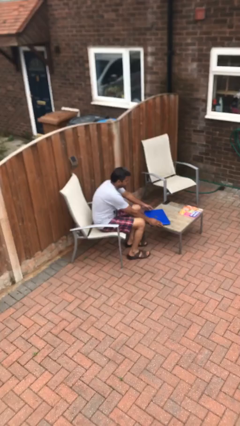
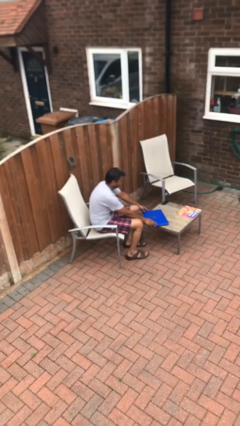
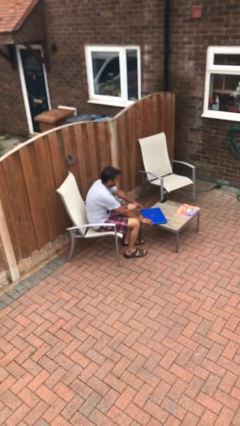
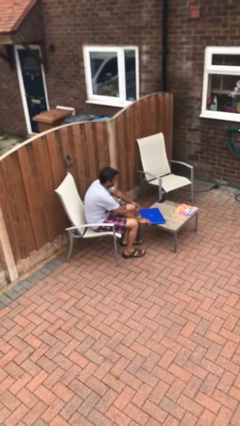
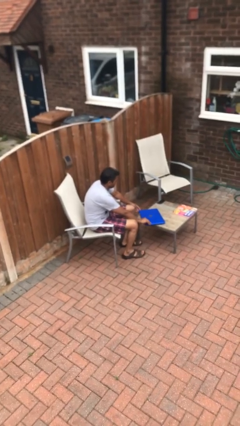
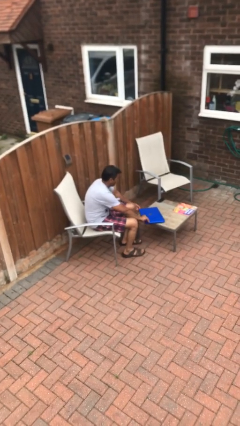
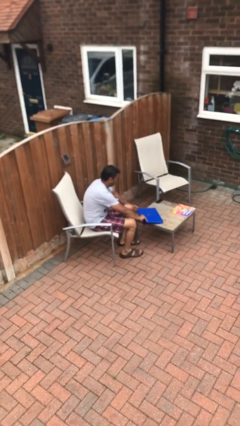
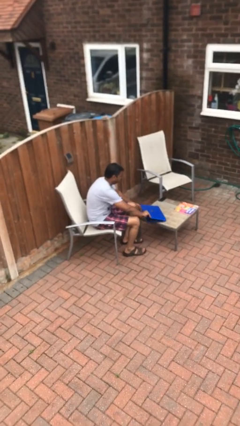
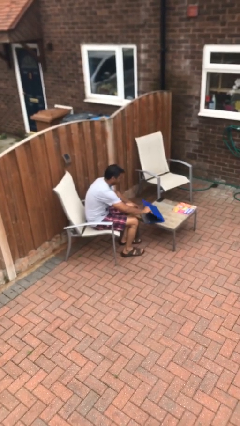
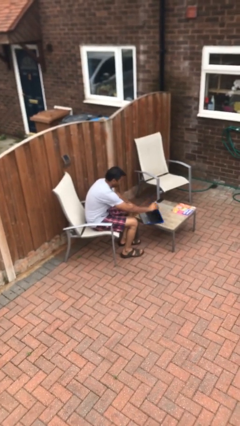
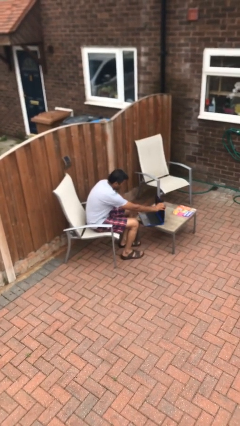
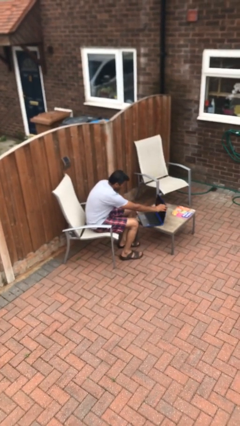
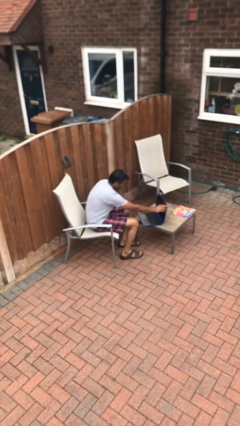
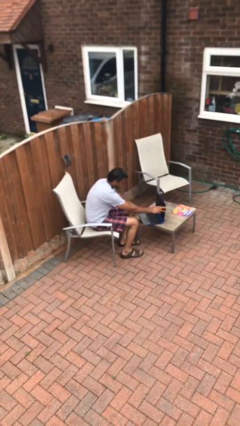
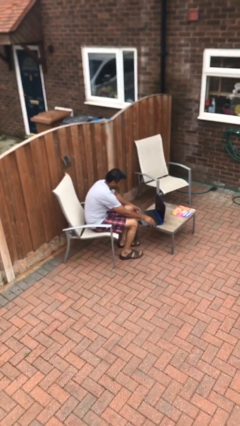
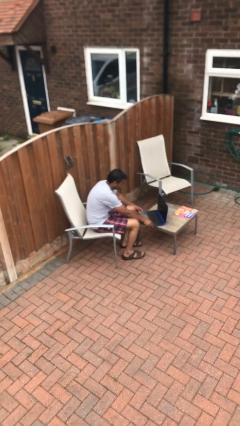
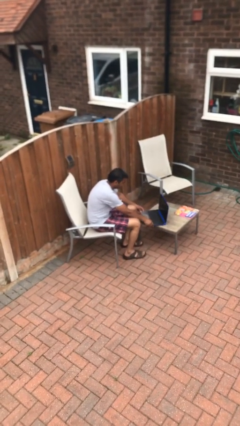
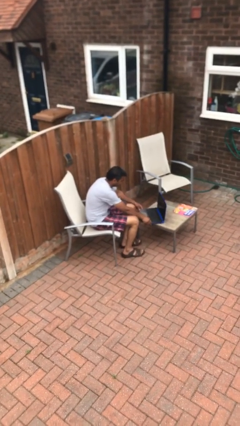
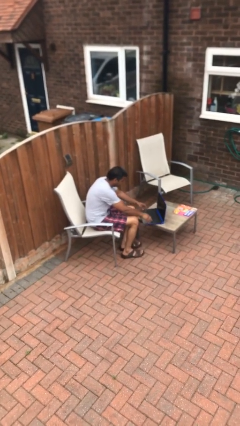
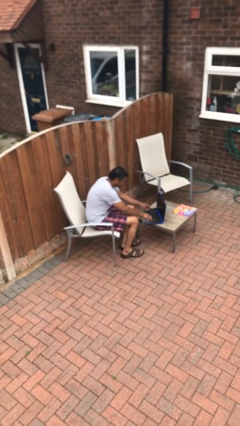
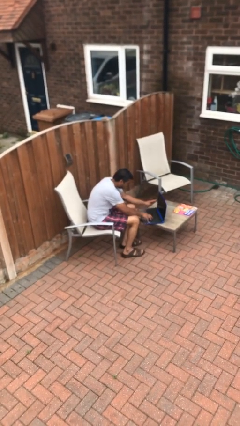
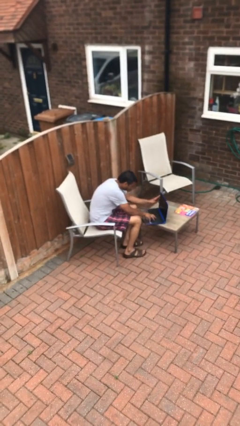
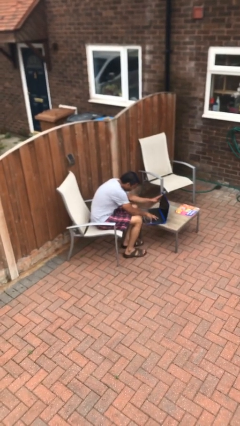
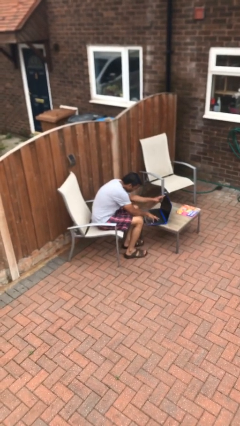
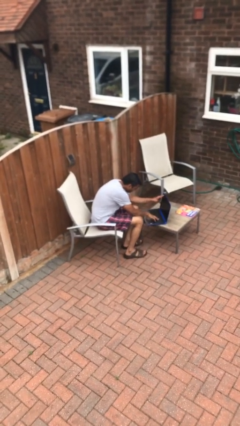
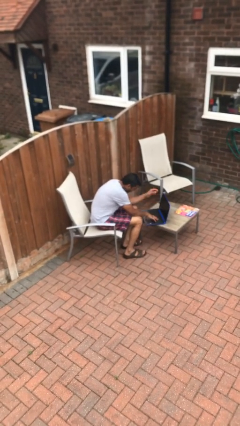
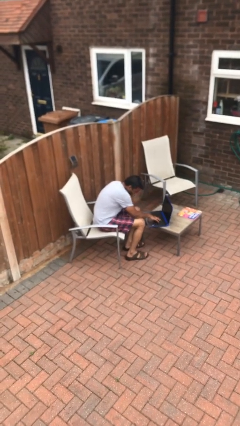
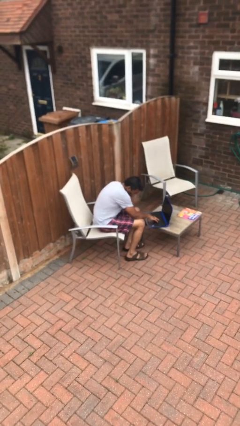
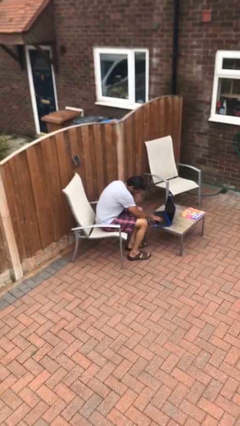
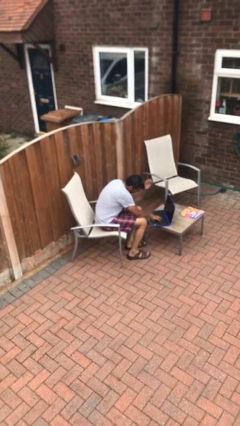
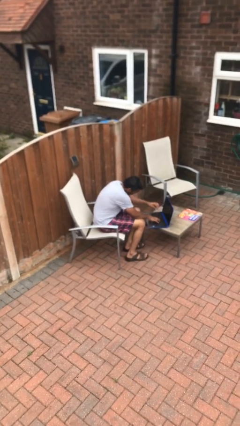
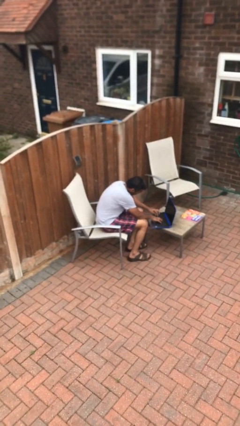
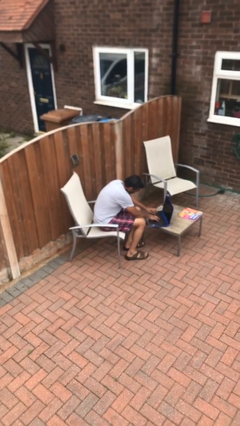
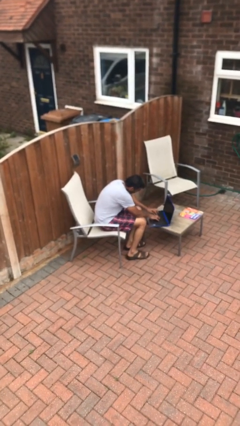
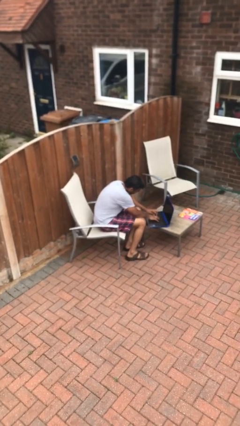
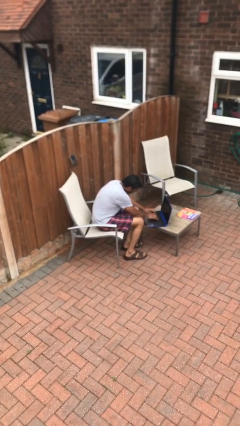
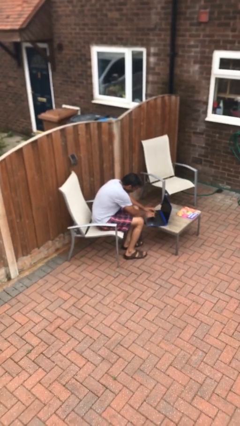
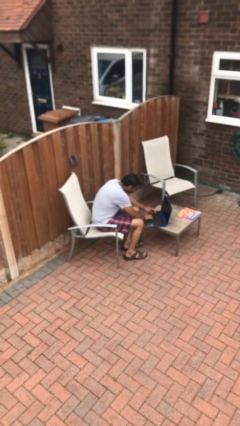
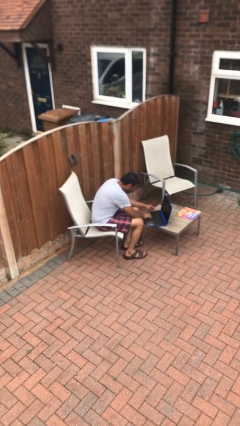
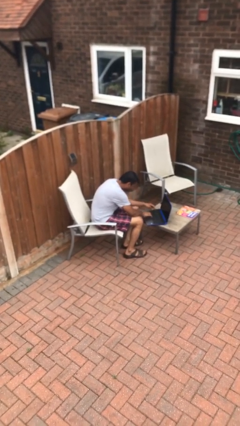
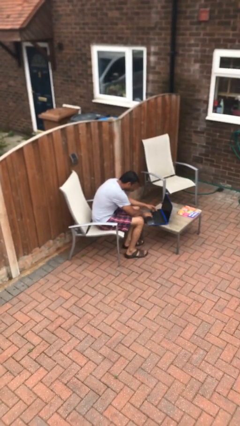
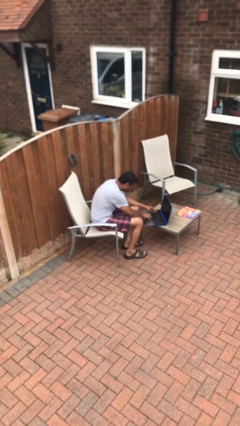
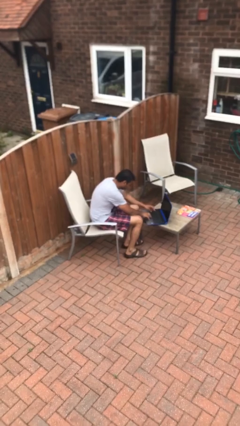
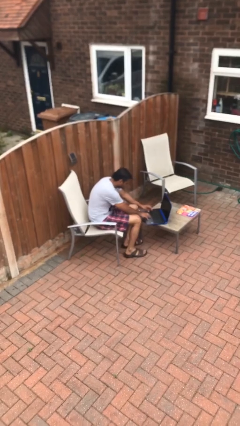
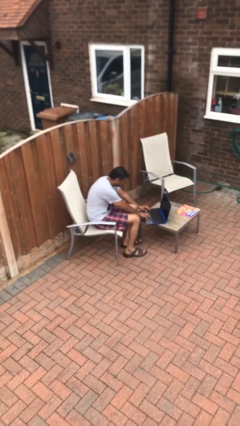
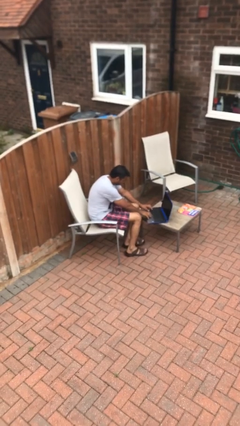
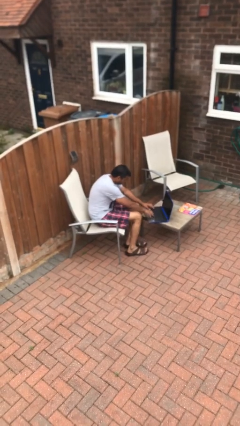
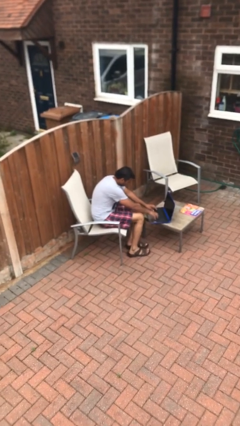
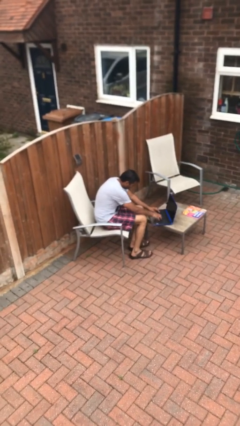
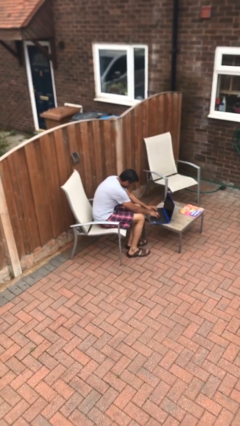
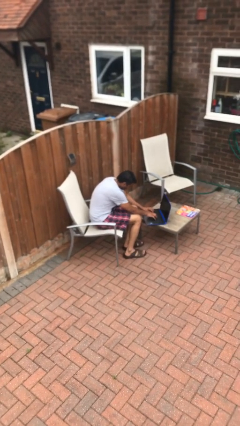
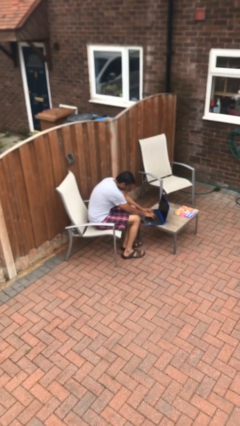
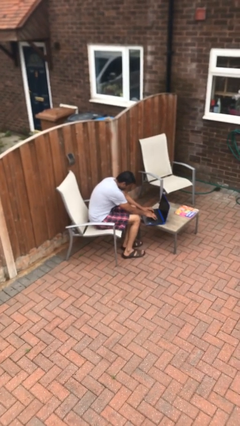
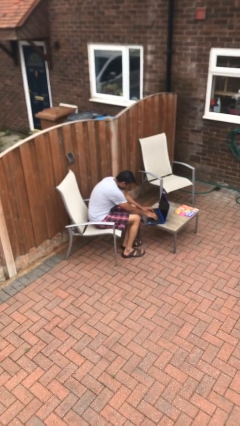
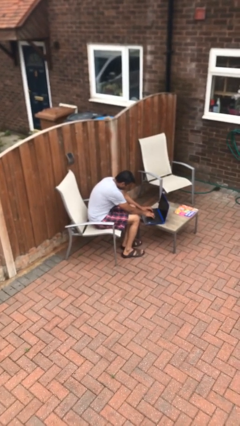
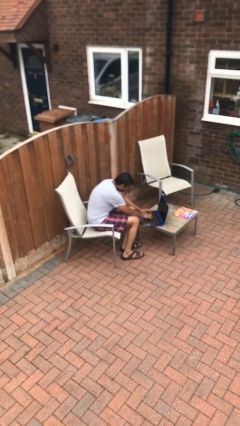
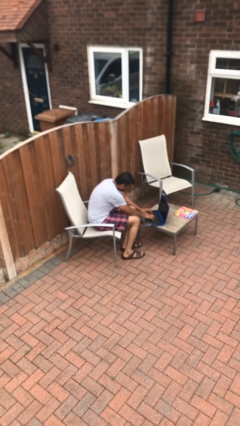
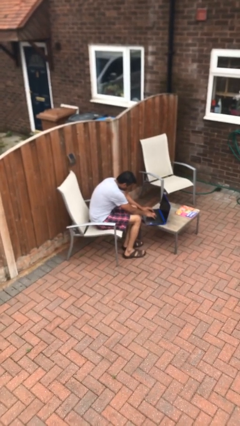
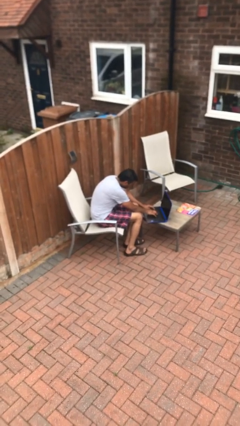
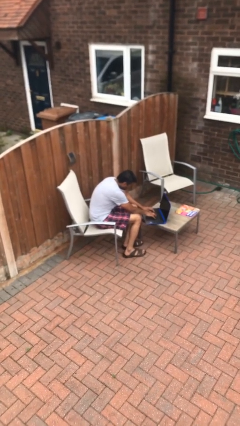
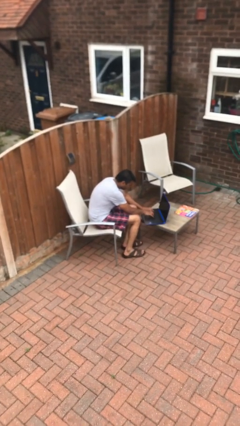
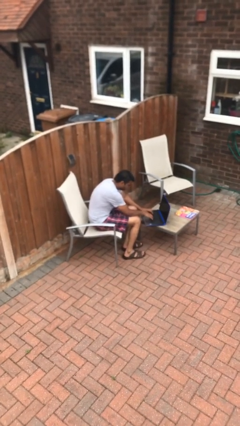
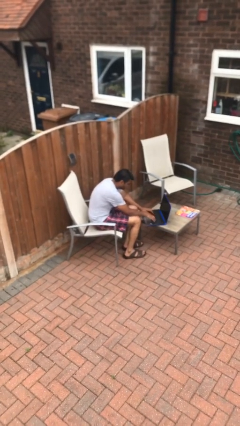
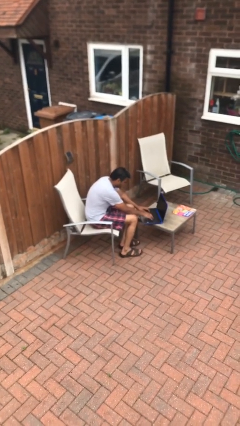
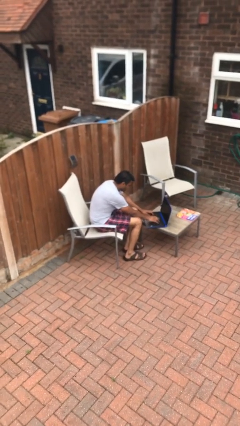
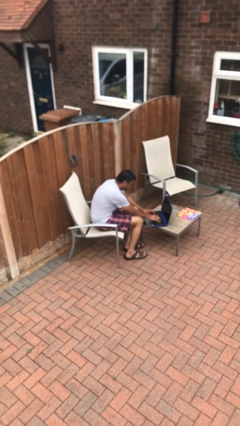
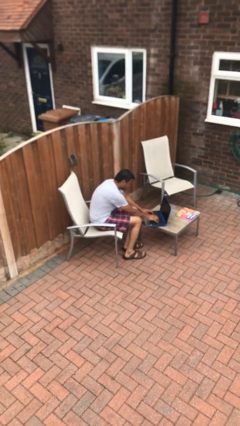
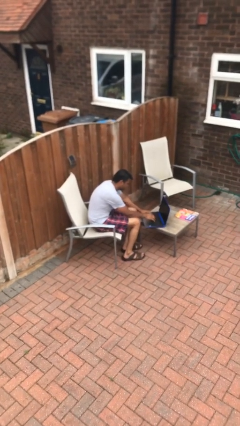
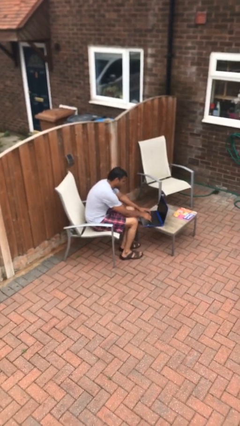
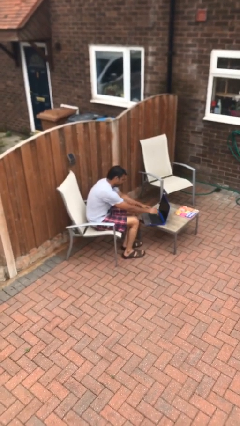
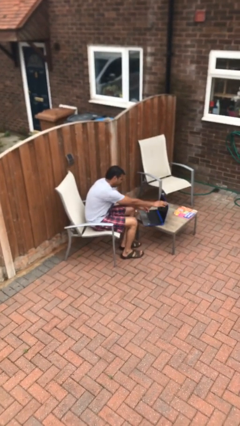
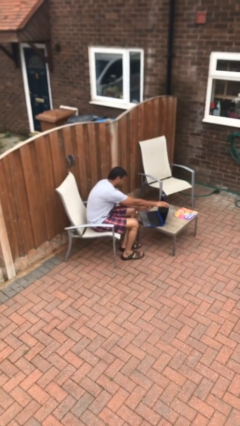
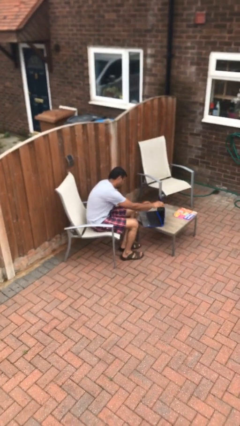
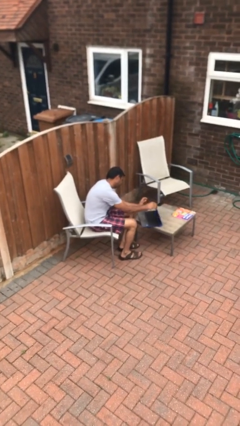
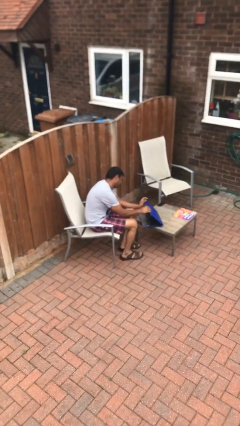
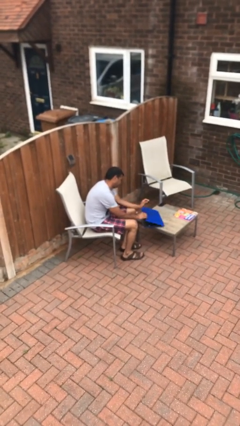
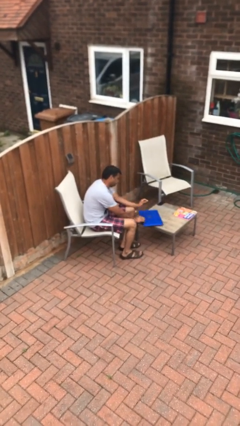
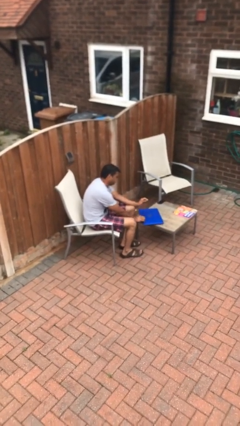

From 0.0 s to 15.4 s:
person interacts with laptop

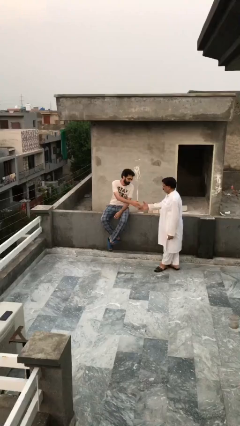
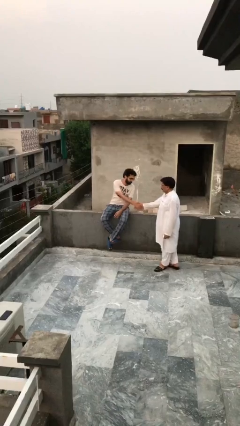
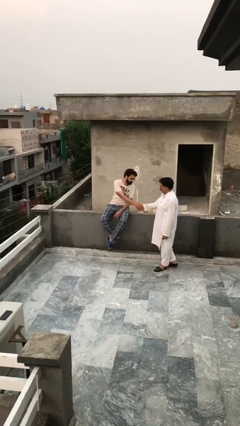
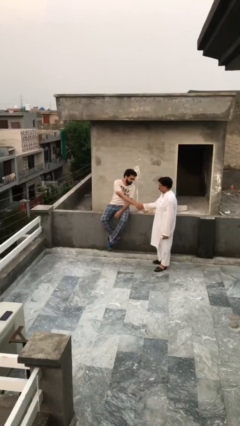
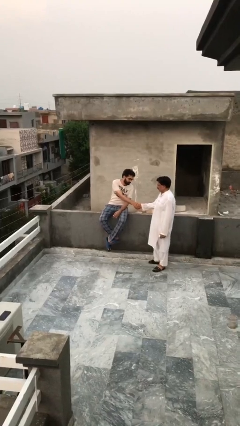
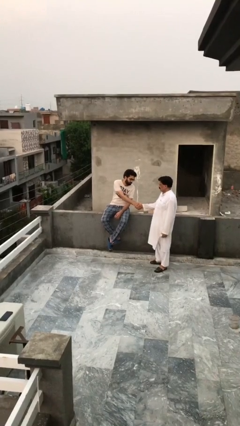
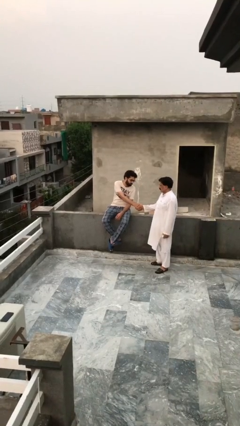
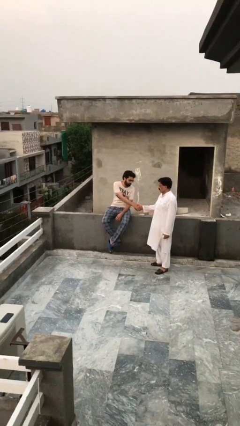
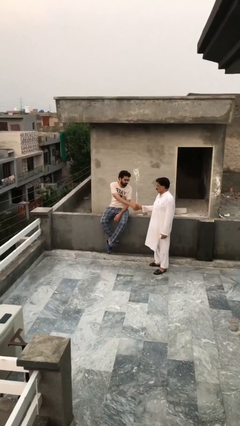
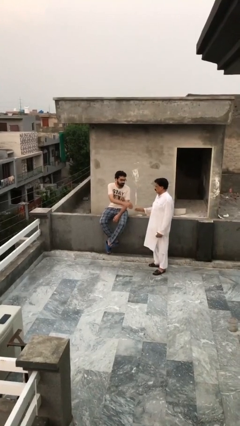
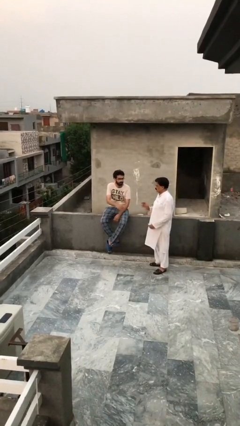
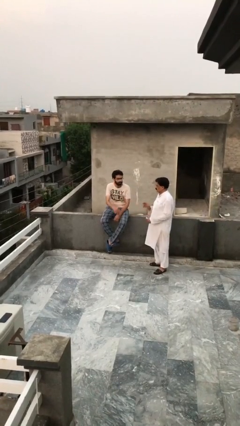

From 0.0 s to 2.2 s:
person shakes hand

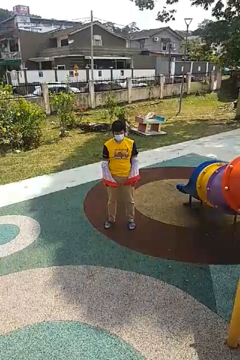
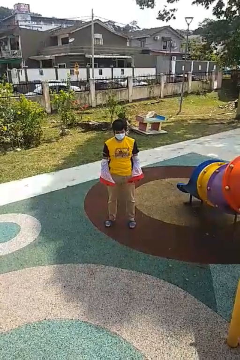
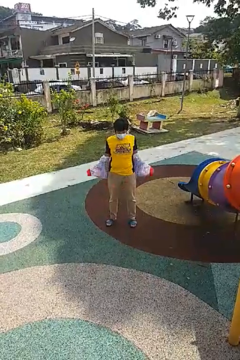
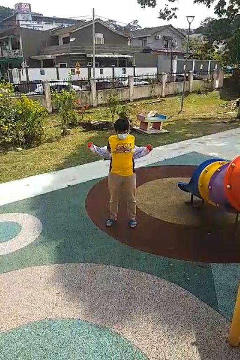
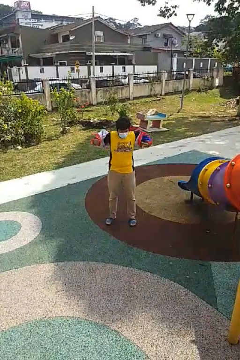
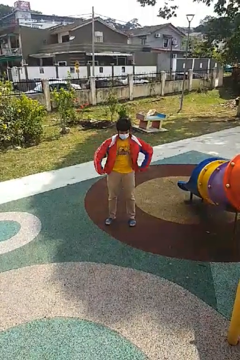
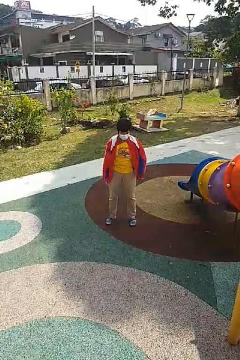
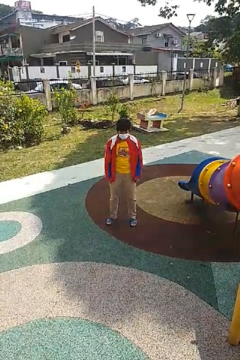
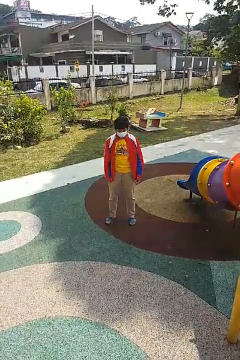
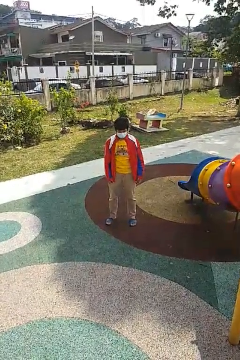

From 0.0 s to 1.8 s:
person puts on jacket
